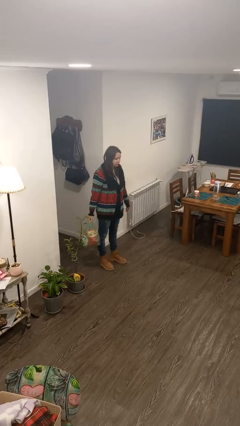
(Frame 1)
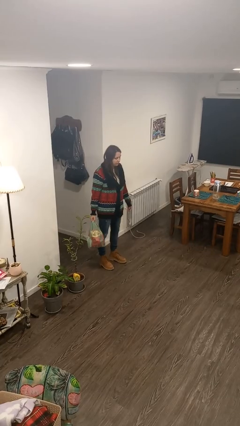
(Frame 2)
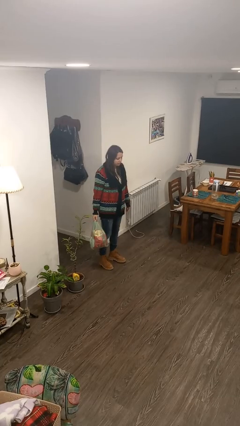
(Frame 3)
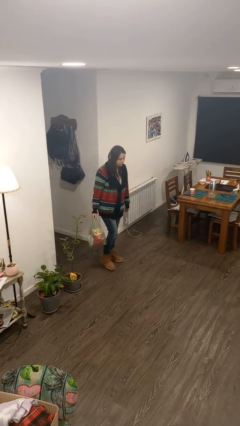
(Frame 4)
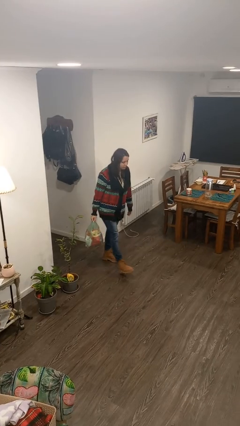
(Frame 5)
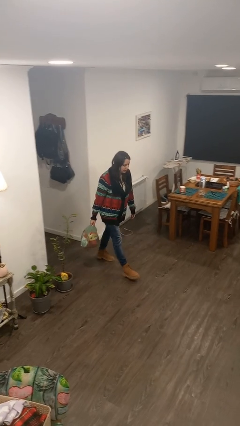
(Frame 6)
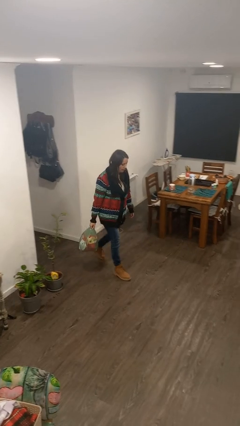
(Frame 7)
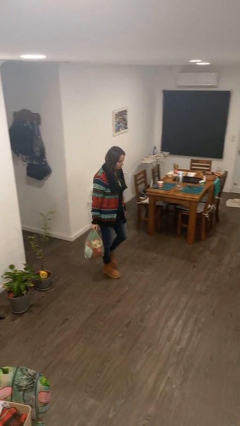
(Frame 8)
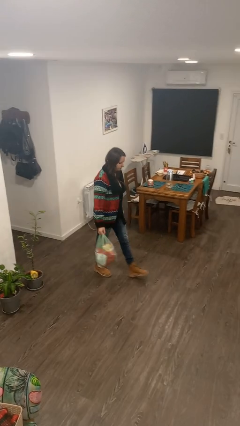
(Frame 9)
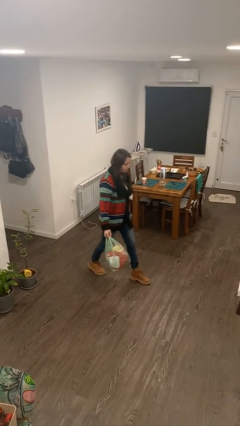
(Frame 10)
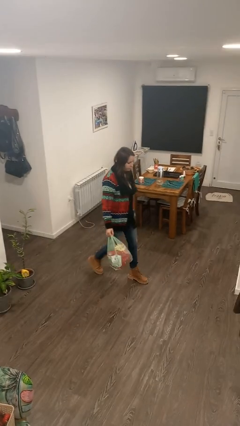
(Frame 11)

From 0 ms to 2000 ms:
person carries groceries

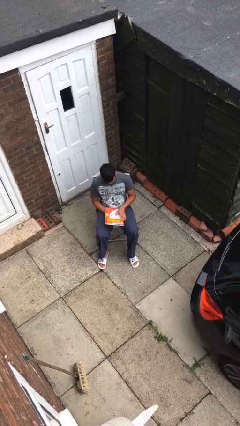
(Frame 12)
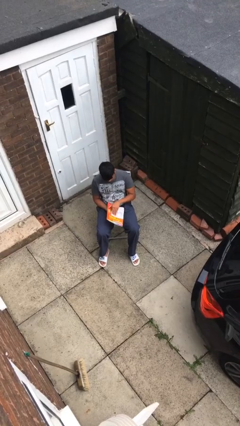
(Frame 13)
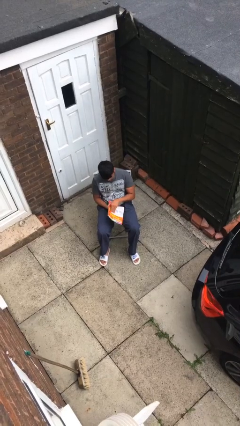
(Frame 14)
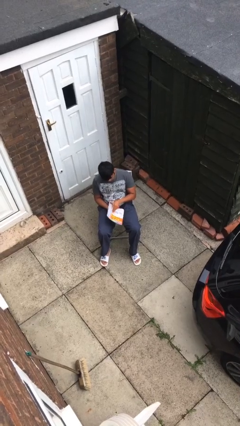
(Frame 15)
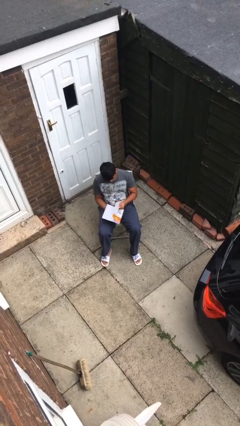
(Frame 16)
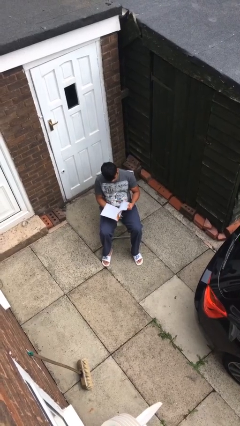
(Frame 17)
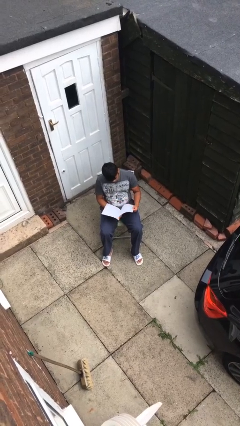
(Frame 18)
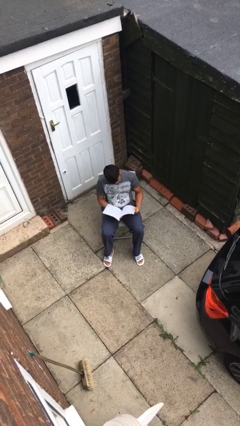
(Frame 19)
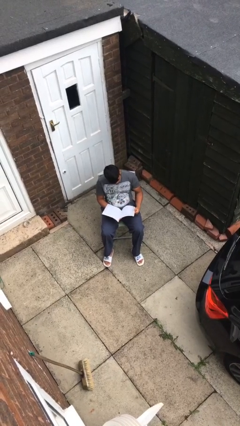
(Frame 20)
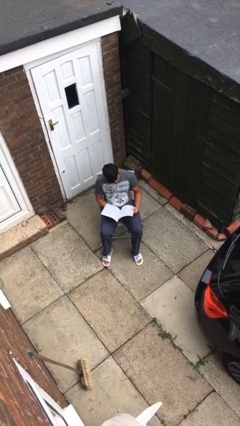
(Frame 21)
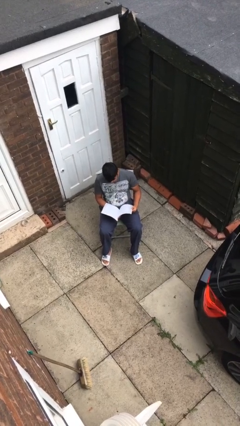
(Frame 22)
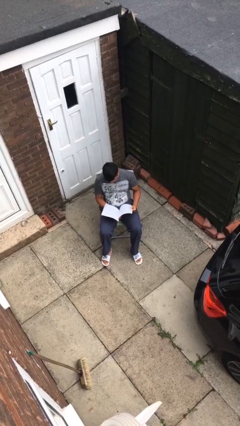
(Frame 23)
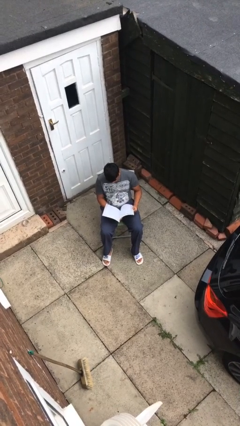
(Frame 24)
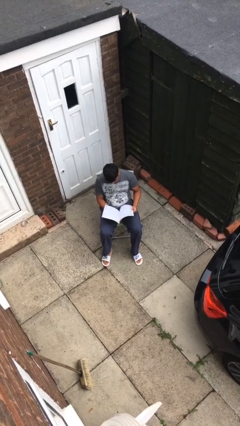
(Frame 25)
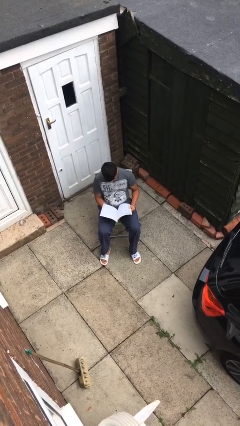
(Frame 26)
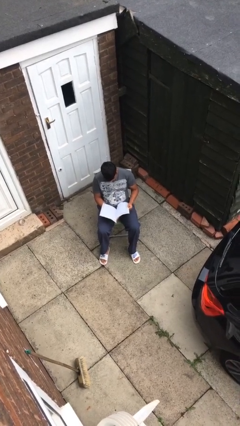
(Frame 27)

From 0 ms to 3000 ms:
person reads magazine

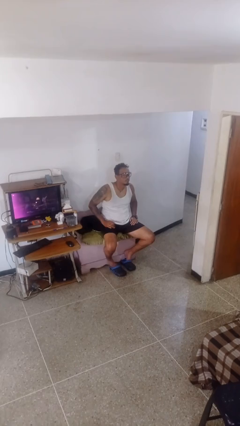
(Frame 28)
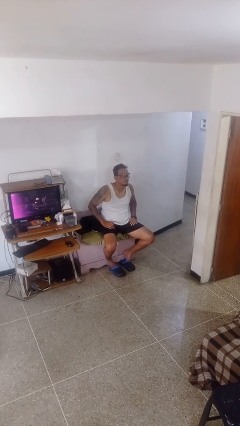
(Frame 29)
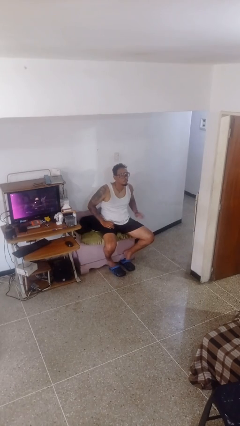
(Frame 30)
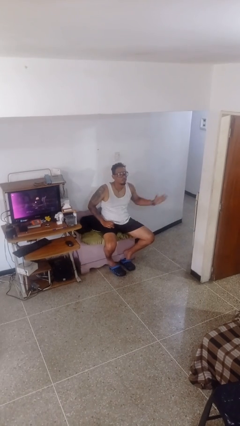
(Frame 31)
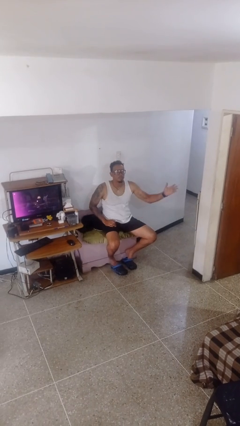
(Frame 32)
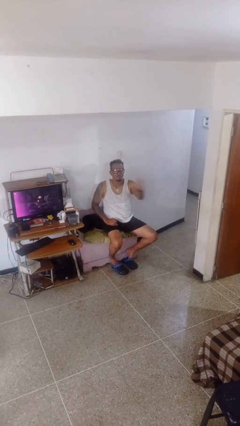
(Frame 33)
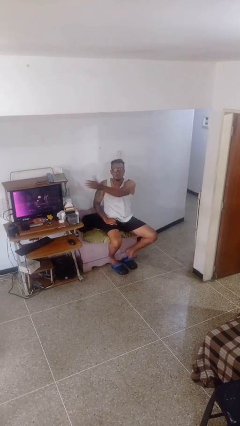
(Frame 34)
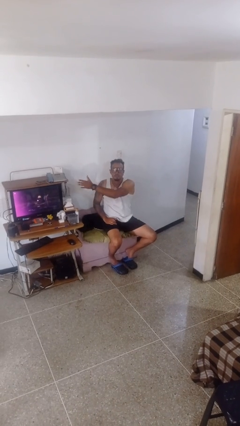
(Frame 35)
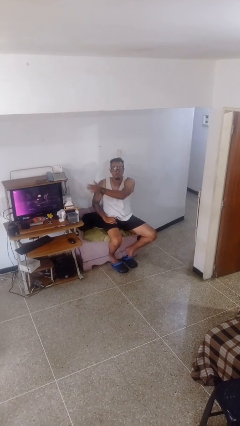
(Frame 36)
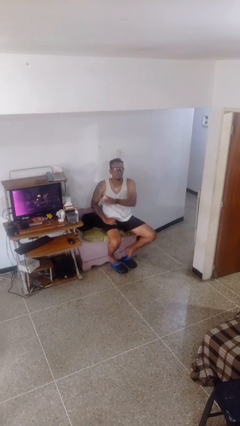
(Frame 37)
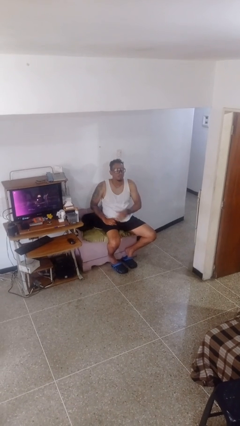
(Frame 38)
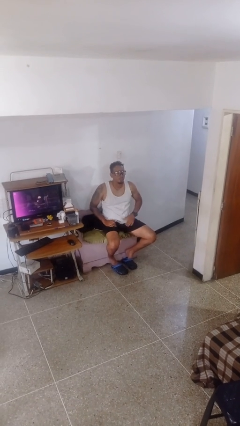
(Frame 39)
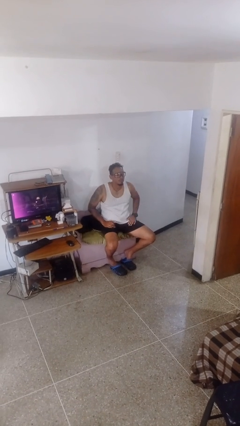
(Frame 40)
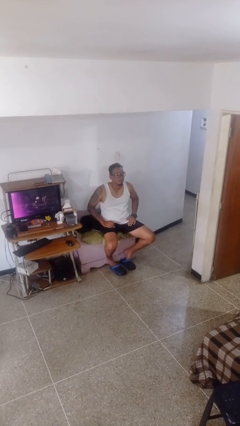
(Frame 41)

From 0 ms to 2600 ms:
person gestures swipe right

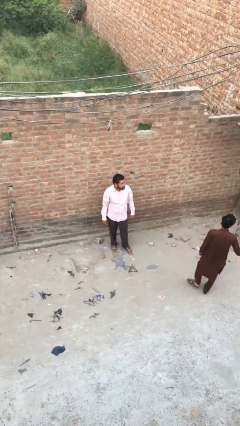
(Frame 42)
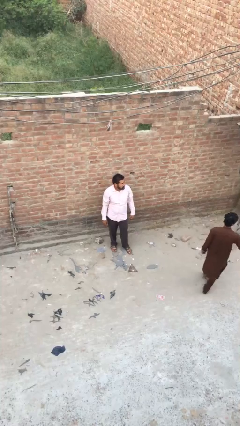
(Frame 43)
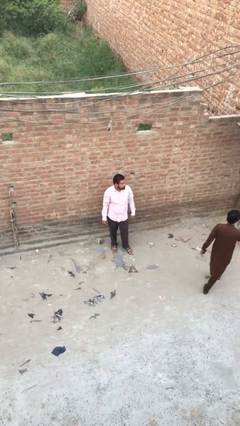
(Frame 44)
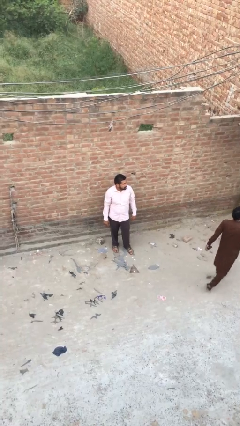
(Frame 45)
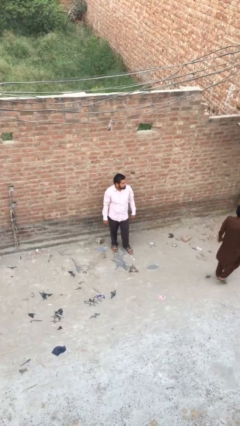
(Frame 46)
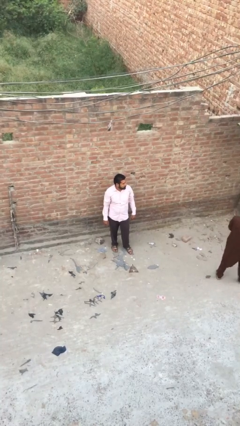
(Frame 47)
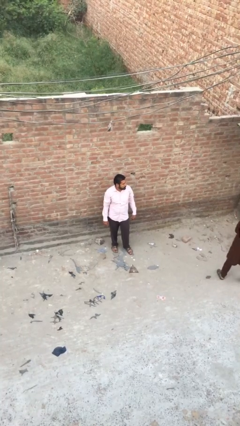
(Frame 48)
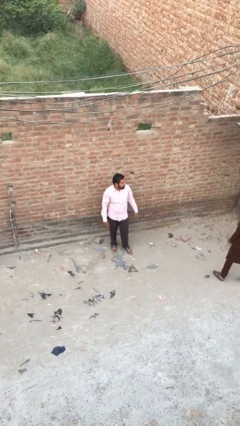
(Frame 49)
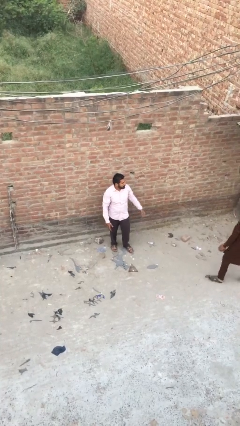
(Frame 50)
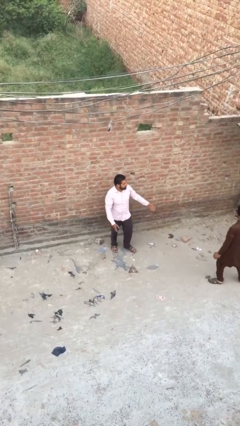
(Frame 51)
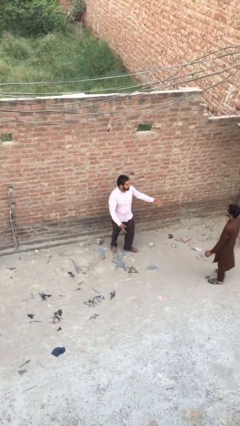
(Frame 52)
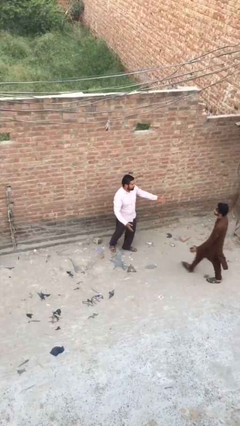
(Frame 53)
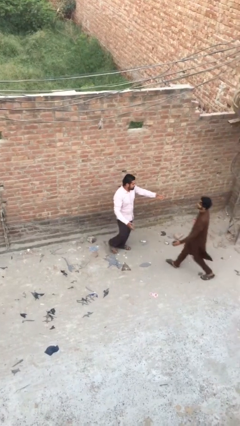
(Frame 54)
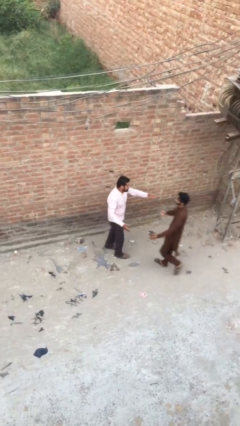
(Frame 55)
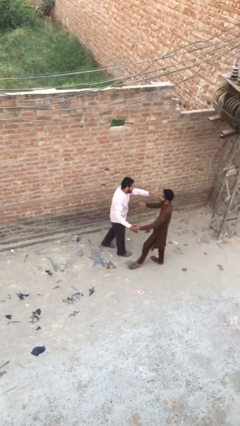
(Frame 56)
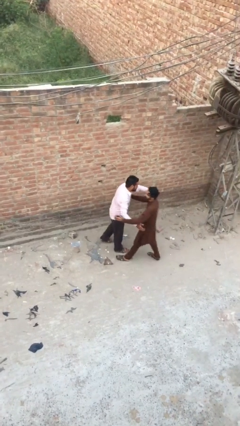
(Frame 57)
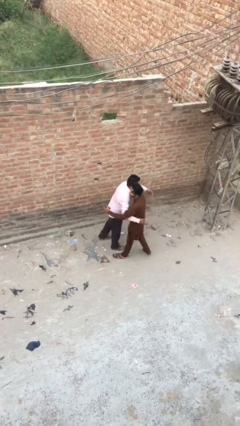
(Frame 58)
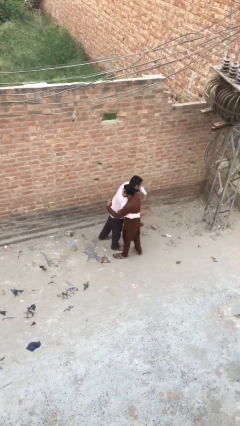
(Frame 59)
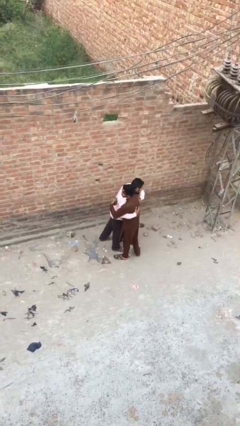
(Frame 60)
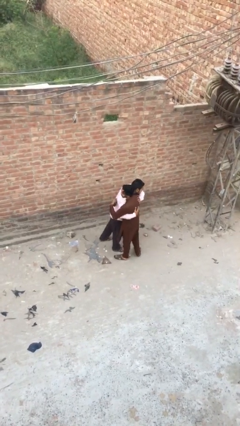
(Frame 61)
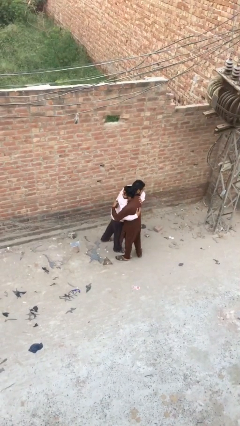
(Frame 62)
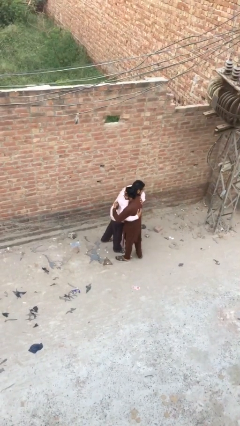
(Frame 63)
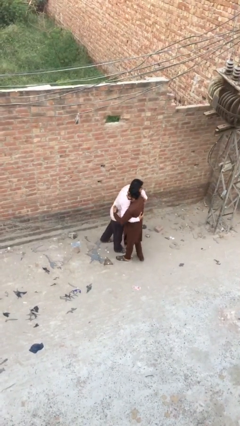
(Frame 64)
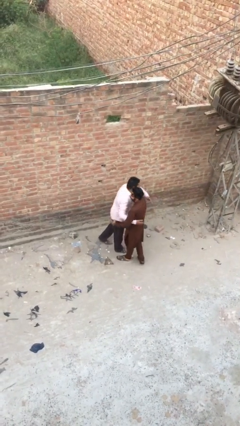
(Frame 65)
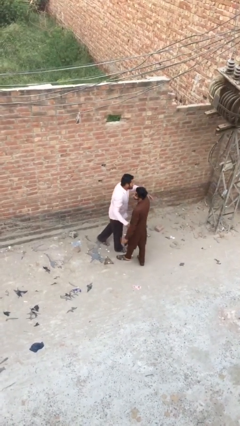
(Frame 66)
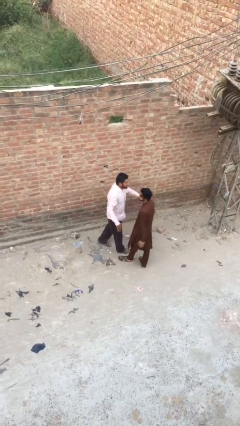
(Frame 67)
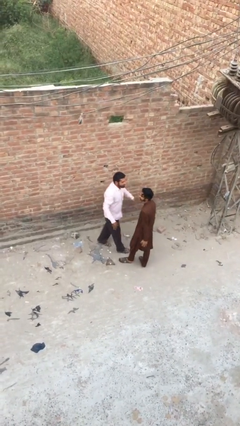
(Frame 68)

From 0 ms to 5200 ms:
person embraces person

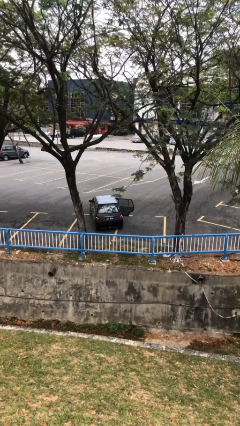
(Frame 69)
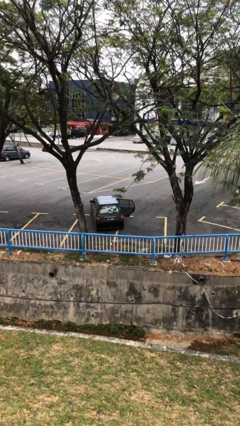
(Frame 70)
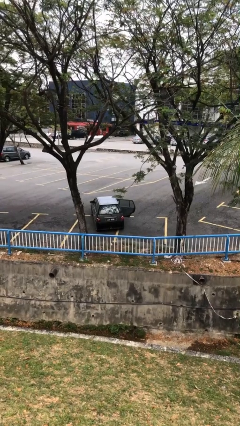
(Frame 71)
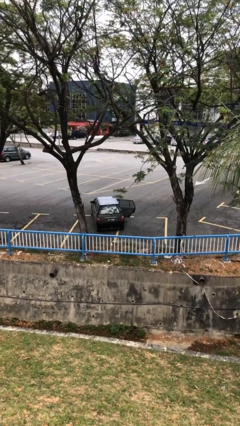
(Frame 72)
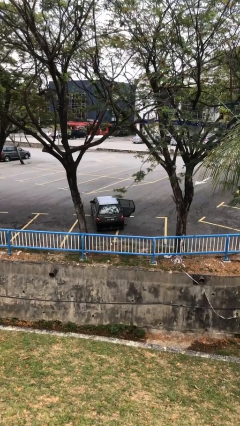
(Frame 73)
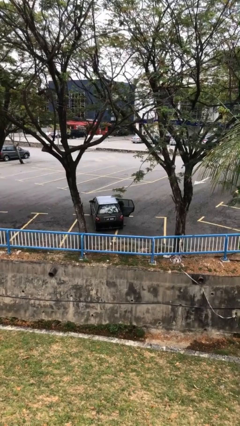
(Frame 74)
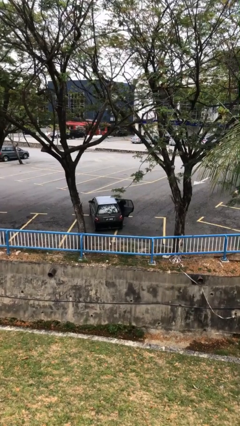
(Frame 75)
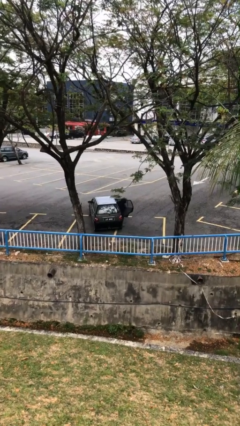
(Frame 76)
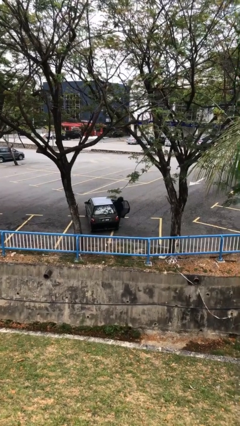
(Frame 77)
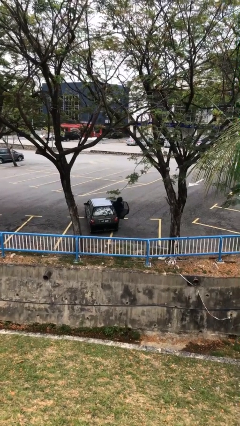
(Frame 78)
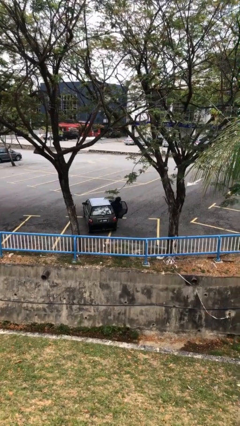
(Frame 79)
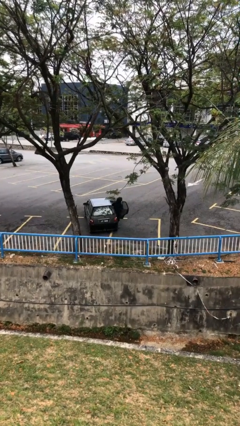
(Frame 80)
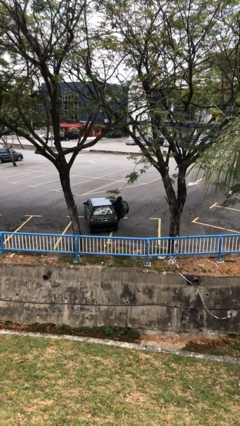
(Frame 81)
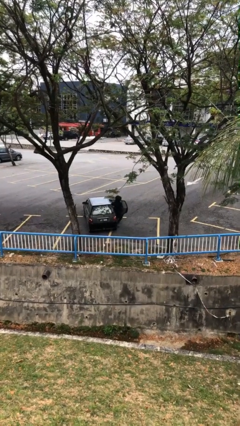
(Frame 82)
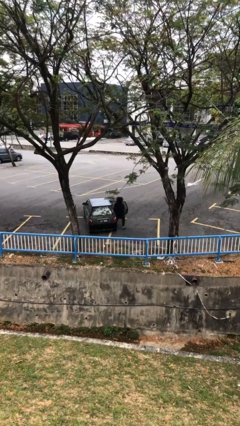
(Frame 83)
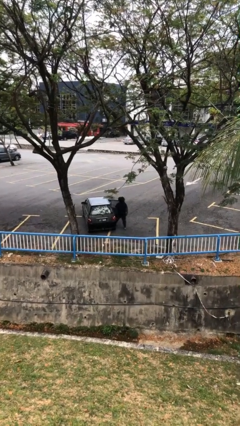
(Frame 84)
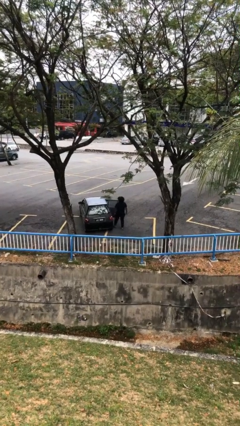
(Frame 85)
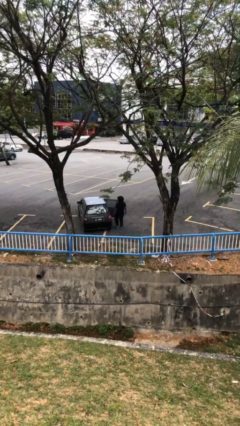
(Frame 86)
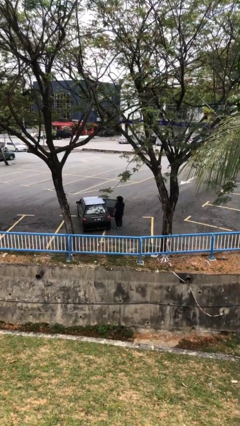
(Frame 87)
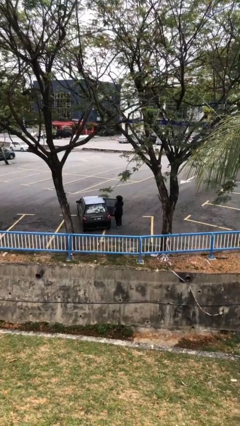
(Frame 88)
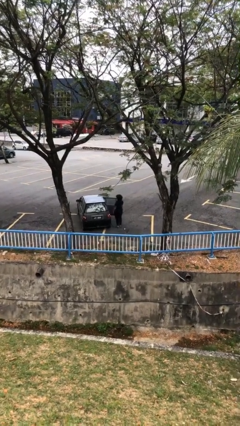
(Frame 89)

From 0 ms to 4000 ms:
person exits car

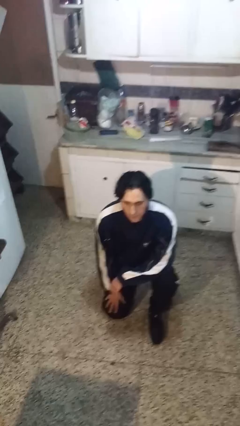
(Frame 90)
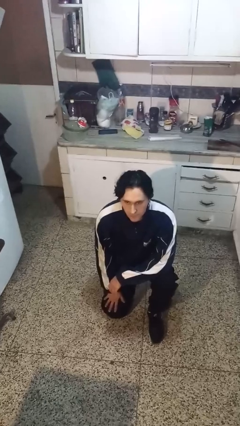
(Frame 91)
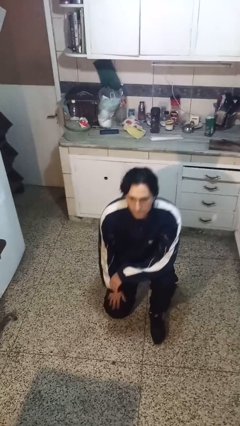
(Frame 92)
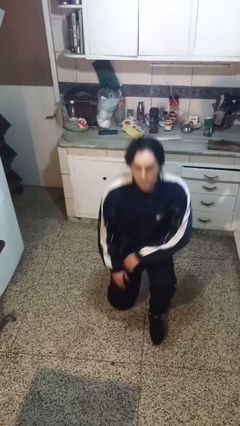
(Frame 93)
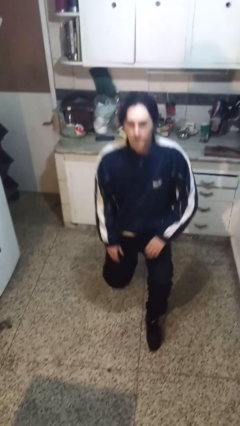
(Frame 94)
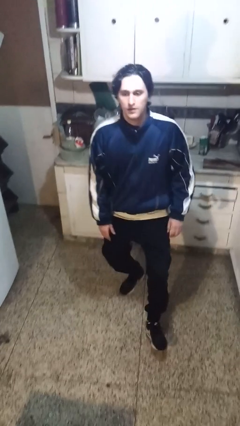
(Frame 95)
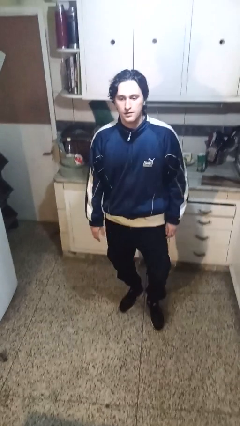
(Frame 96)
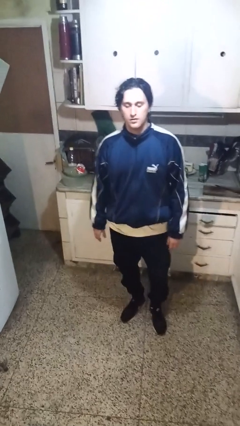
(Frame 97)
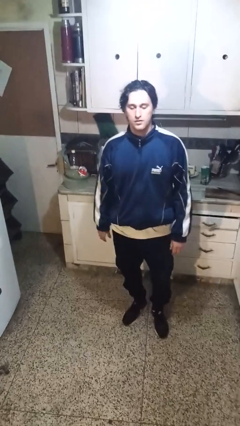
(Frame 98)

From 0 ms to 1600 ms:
person stands up from floor
